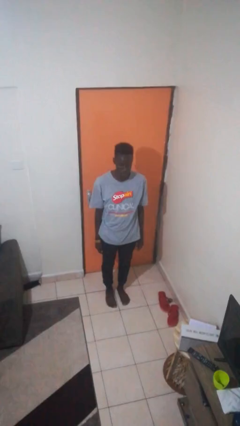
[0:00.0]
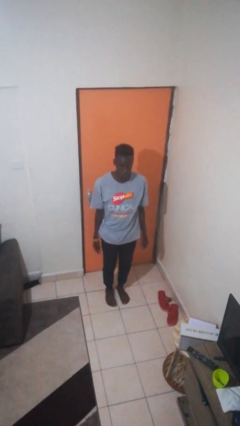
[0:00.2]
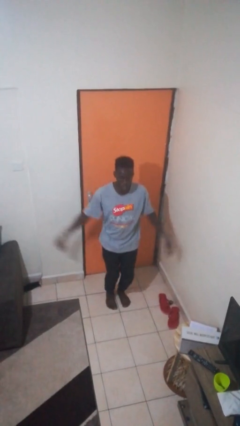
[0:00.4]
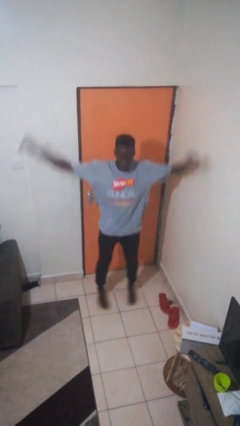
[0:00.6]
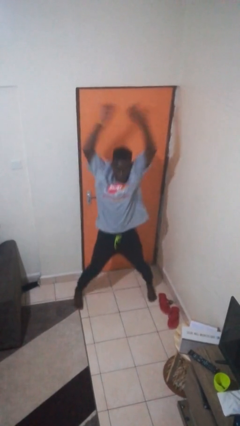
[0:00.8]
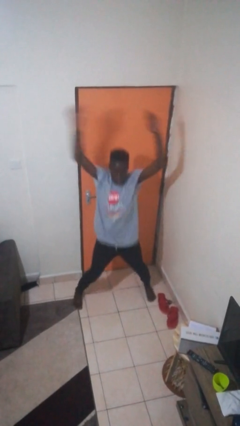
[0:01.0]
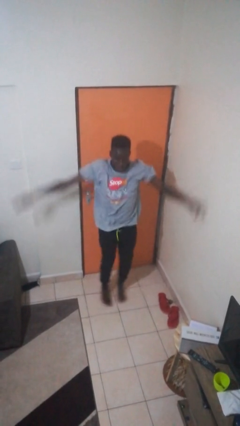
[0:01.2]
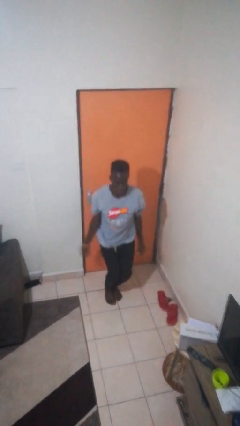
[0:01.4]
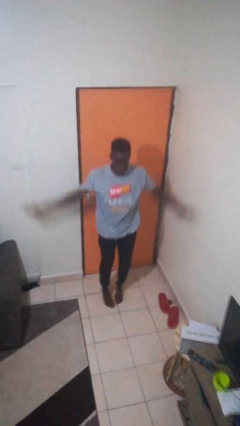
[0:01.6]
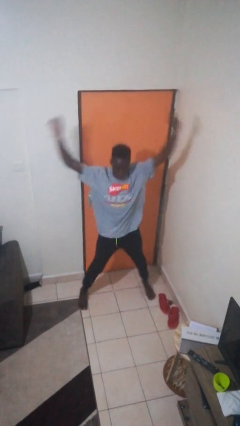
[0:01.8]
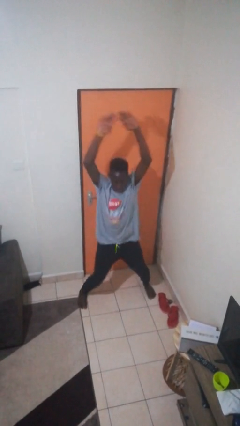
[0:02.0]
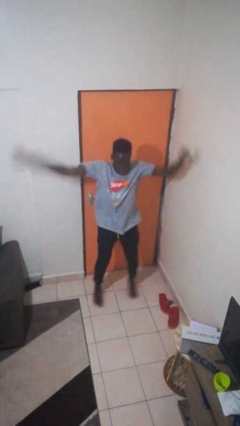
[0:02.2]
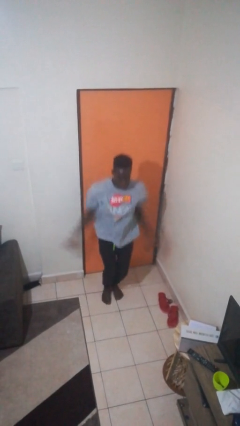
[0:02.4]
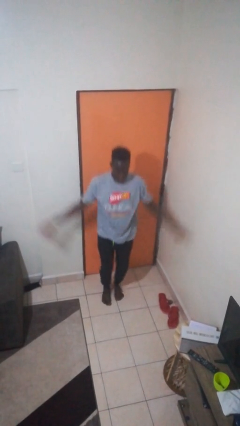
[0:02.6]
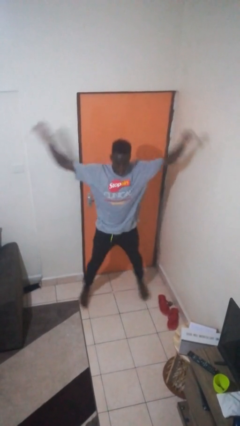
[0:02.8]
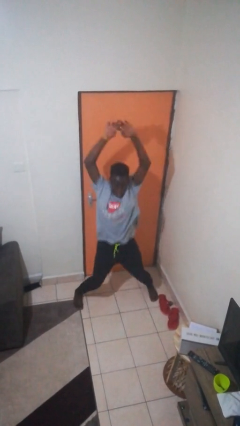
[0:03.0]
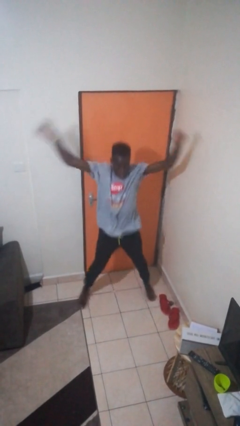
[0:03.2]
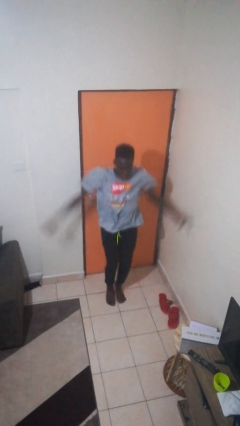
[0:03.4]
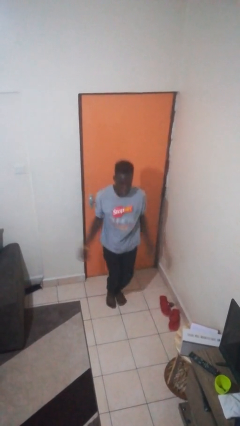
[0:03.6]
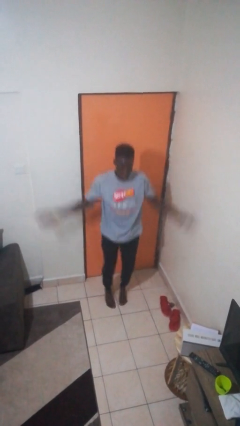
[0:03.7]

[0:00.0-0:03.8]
person exercises with jumping jacks

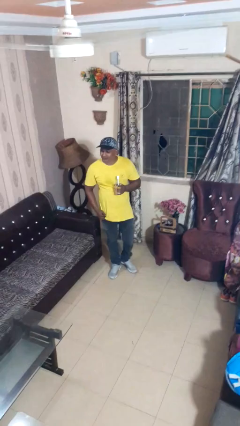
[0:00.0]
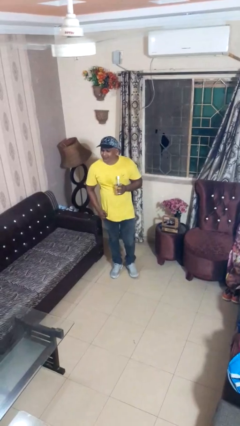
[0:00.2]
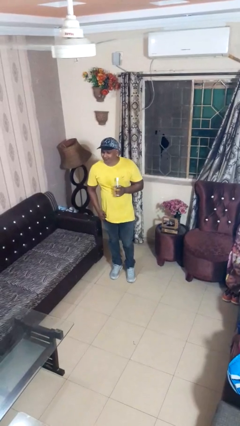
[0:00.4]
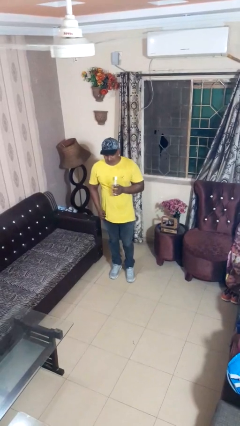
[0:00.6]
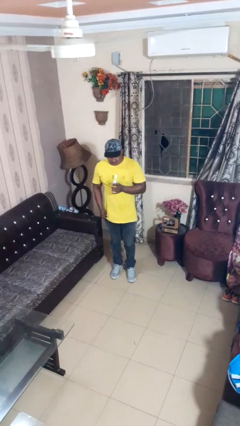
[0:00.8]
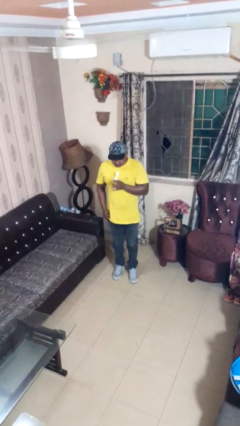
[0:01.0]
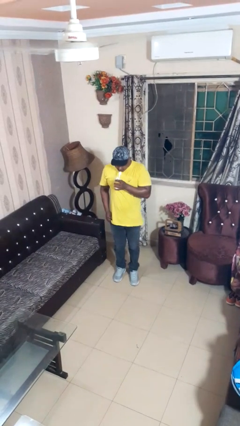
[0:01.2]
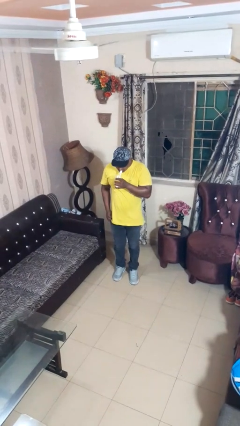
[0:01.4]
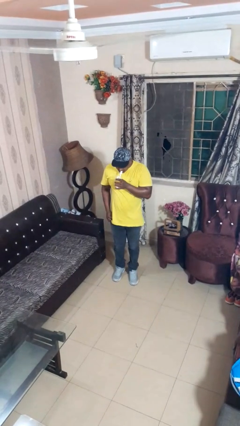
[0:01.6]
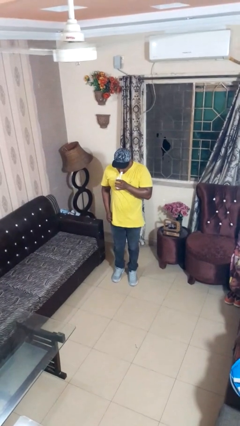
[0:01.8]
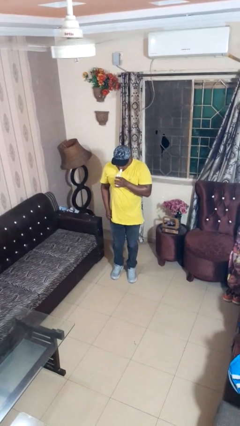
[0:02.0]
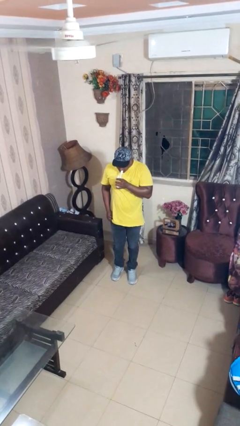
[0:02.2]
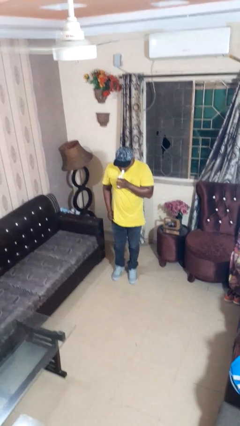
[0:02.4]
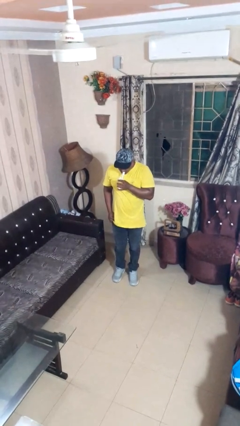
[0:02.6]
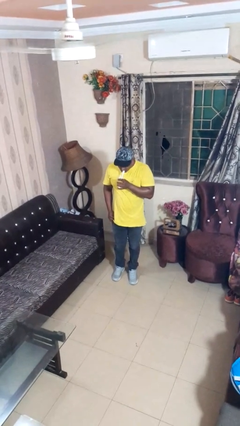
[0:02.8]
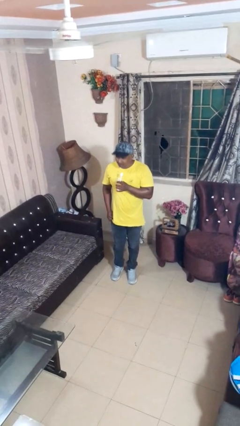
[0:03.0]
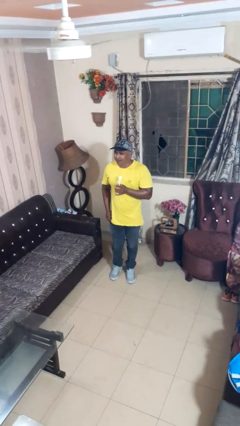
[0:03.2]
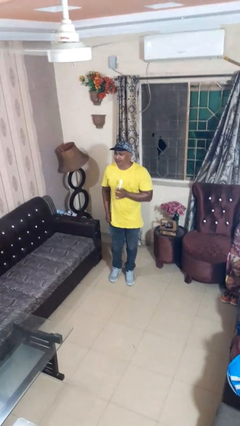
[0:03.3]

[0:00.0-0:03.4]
person drinks from straw

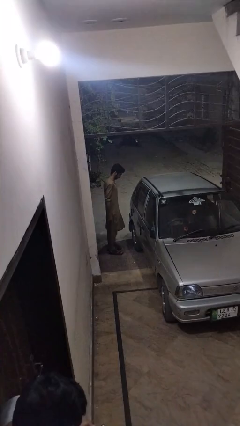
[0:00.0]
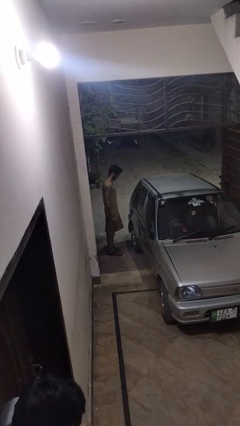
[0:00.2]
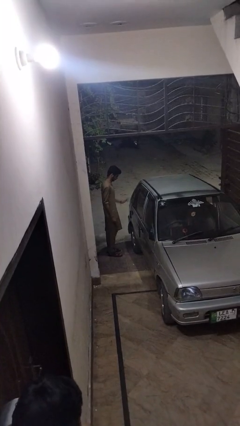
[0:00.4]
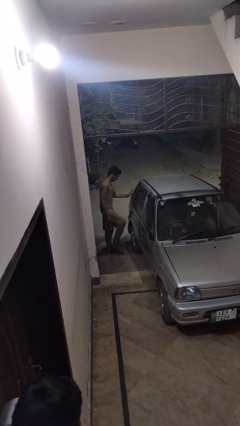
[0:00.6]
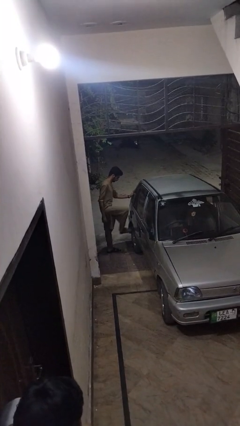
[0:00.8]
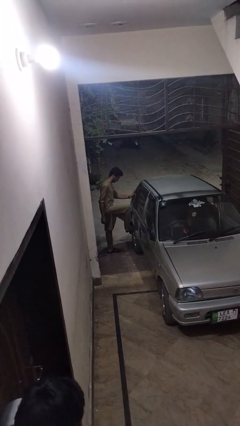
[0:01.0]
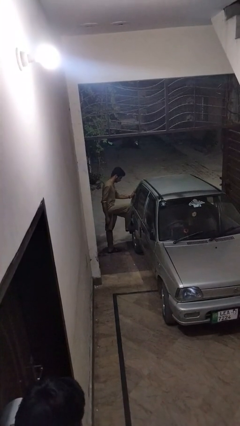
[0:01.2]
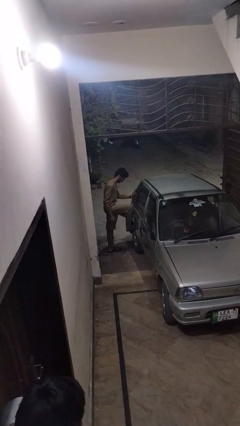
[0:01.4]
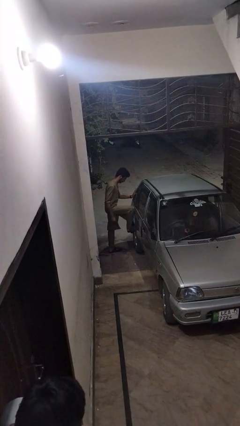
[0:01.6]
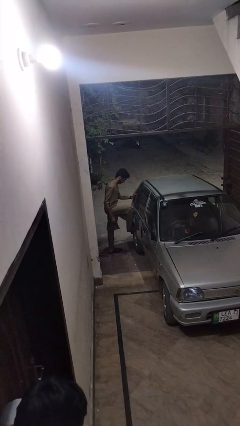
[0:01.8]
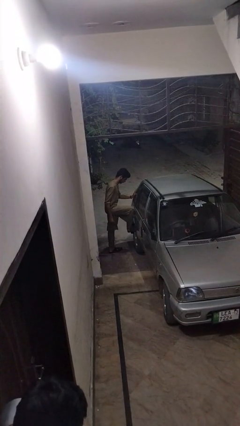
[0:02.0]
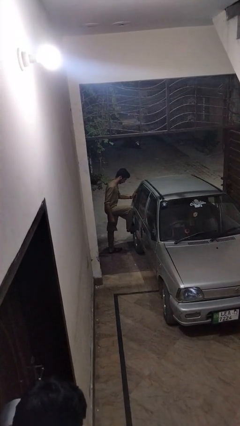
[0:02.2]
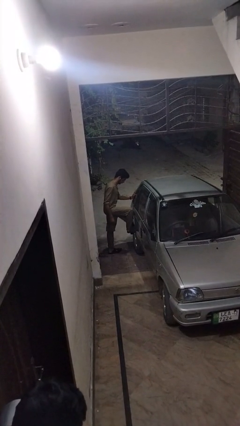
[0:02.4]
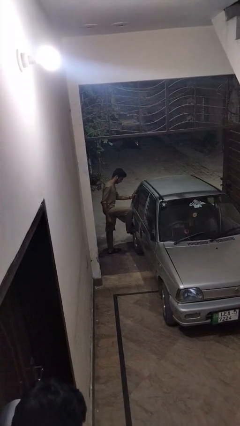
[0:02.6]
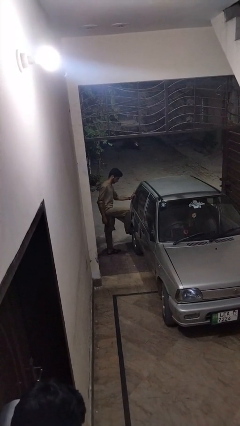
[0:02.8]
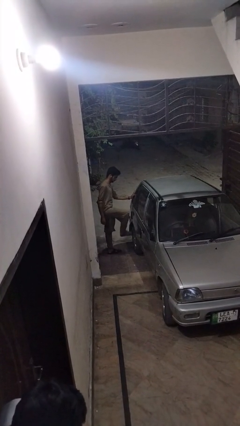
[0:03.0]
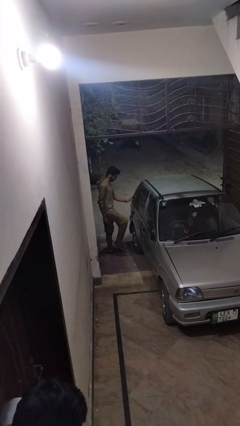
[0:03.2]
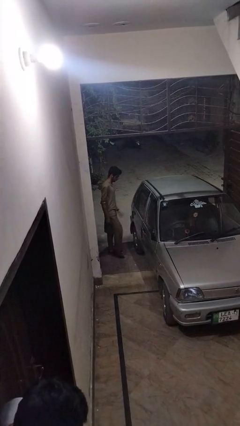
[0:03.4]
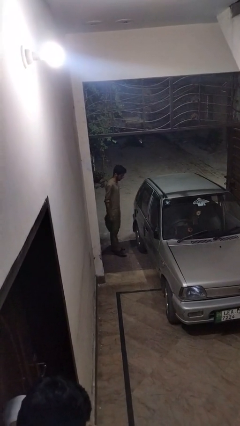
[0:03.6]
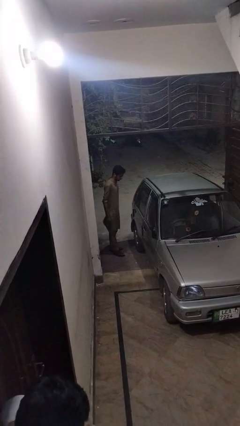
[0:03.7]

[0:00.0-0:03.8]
person kicks car tires

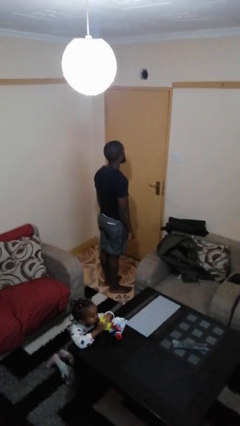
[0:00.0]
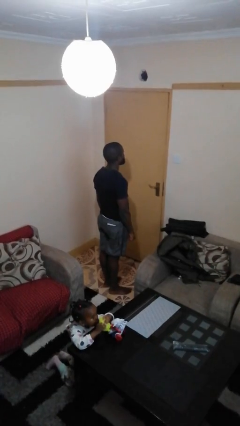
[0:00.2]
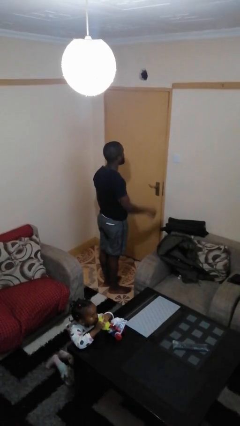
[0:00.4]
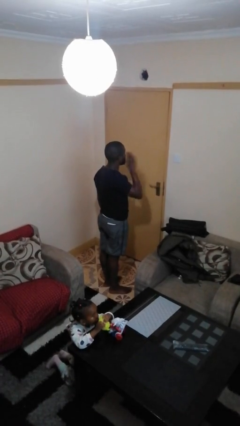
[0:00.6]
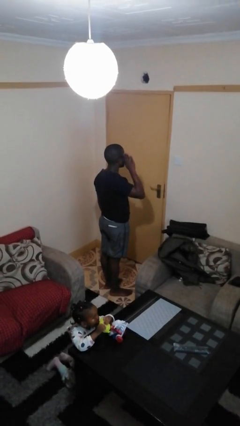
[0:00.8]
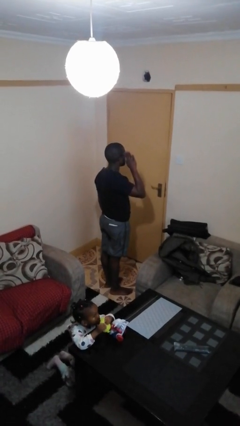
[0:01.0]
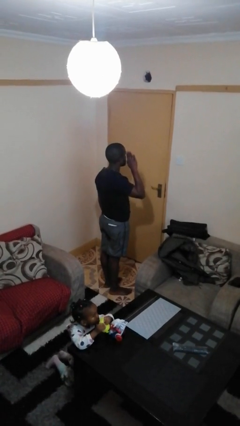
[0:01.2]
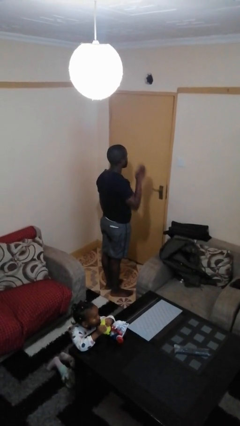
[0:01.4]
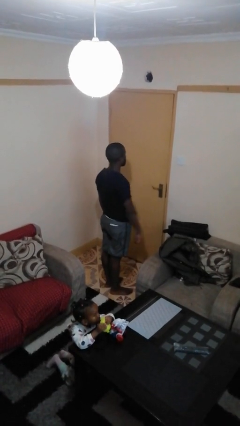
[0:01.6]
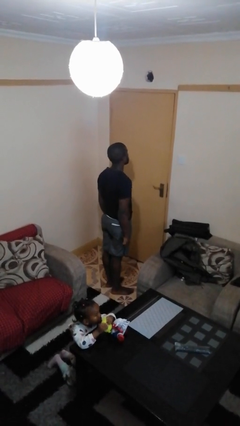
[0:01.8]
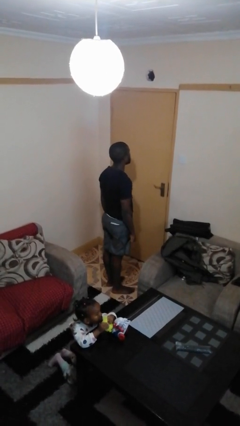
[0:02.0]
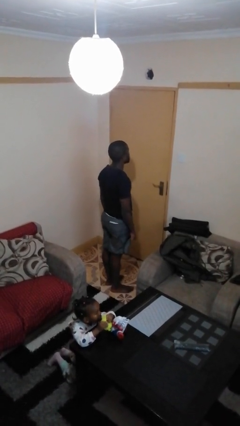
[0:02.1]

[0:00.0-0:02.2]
person salutes

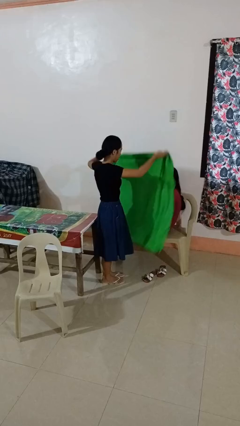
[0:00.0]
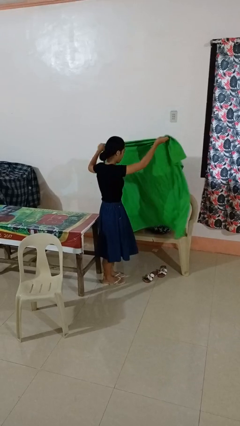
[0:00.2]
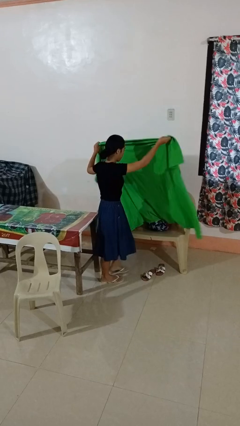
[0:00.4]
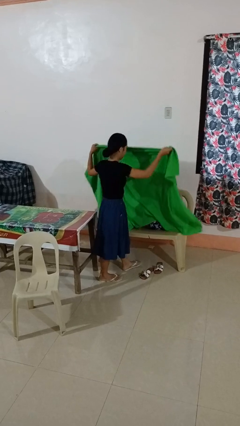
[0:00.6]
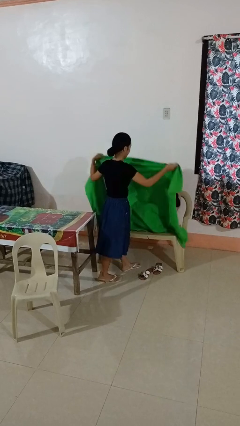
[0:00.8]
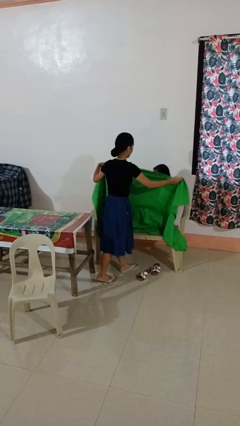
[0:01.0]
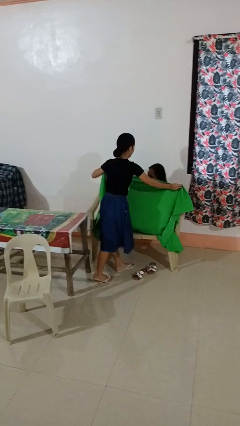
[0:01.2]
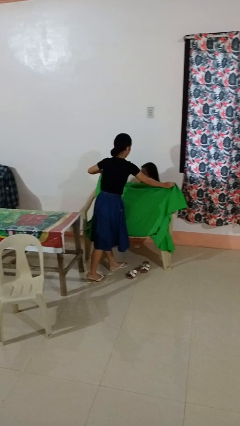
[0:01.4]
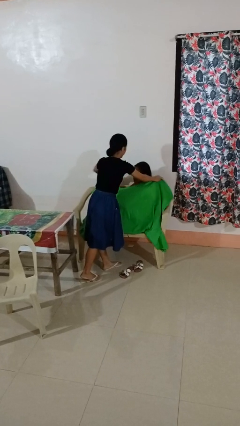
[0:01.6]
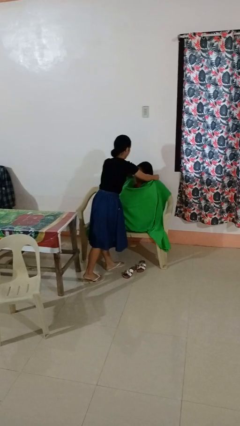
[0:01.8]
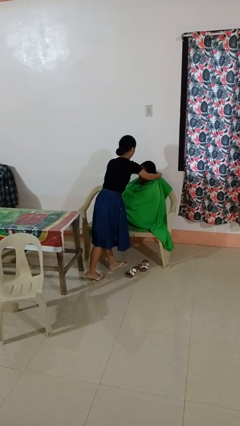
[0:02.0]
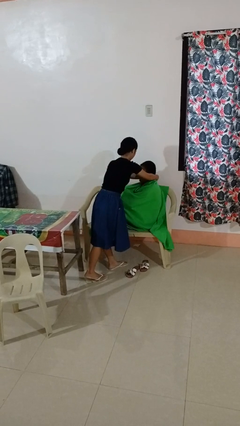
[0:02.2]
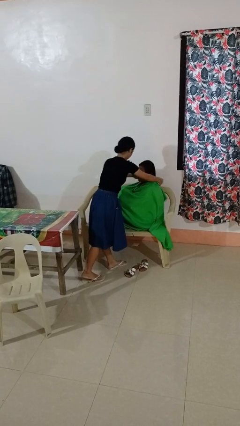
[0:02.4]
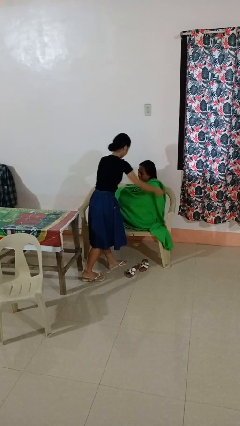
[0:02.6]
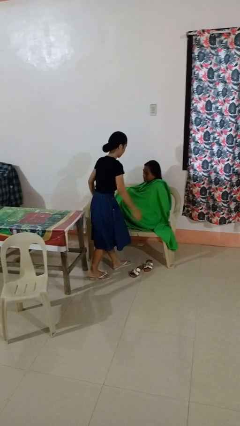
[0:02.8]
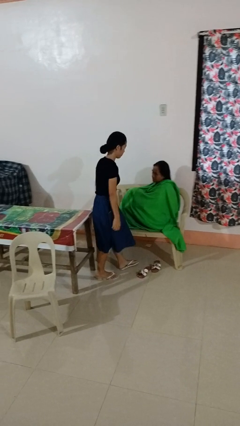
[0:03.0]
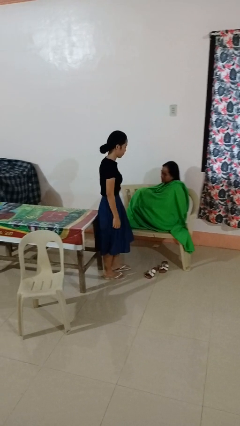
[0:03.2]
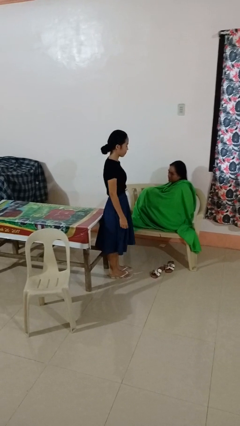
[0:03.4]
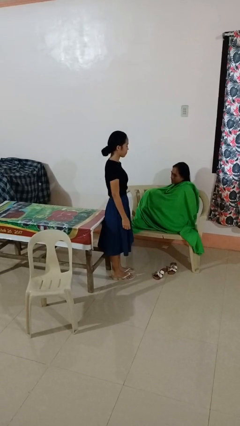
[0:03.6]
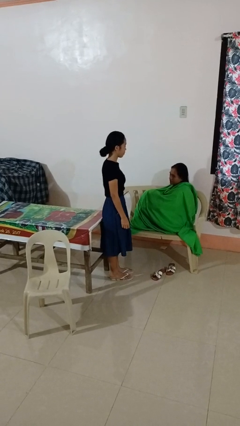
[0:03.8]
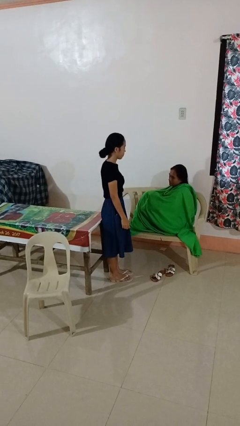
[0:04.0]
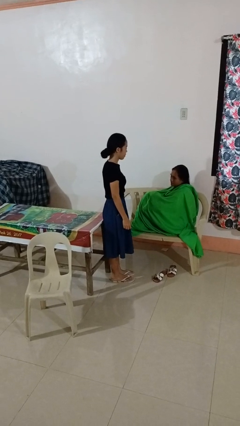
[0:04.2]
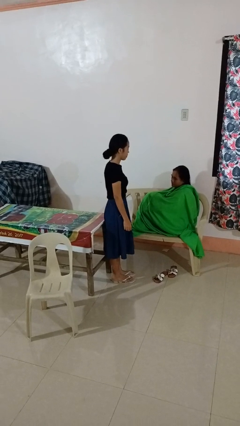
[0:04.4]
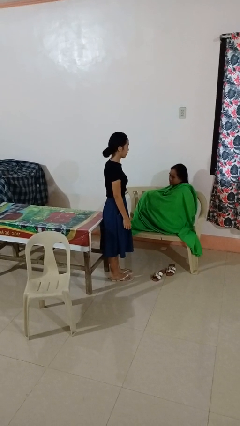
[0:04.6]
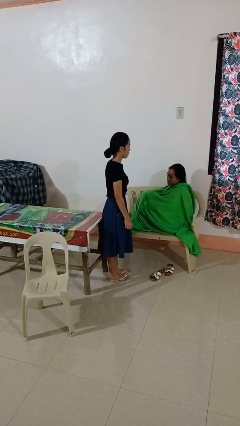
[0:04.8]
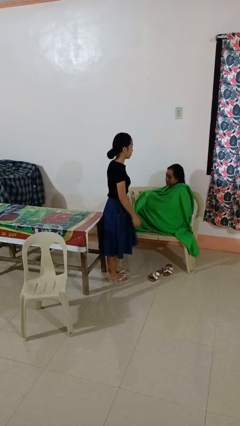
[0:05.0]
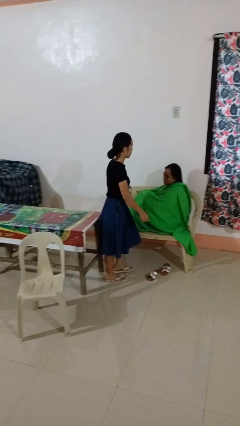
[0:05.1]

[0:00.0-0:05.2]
person covers friend with blanket
